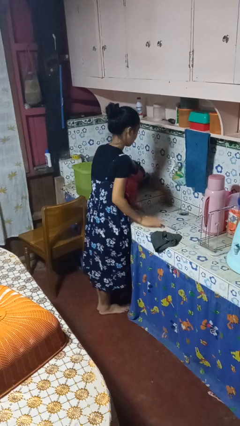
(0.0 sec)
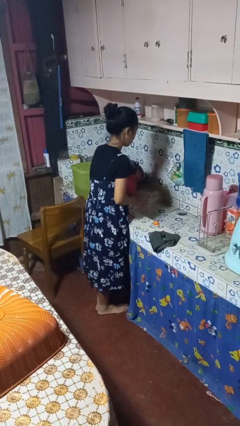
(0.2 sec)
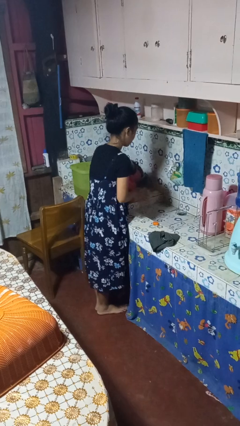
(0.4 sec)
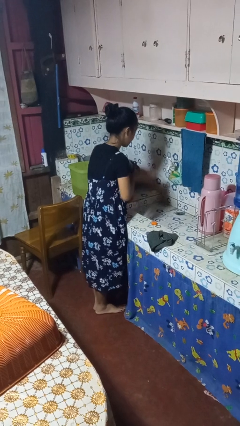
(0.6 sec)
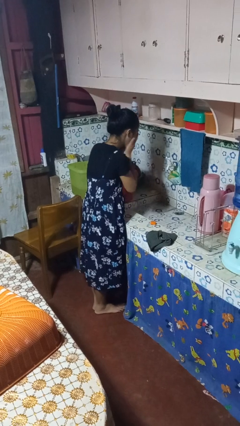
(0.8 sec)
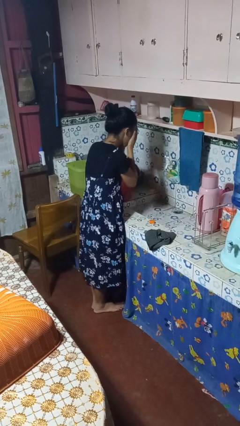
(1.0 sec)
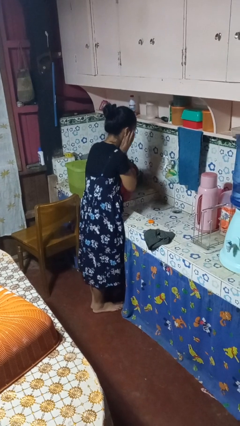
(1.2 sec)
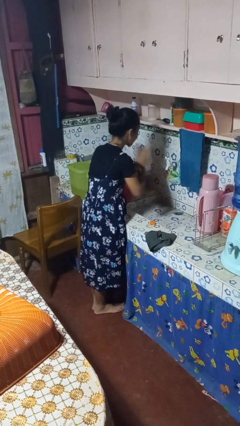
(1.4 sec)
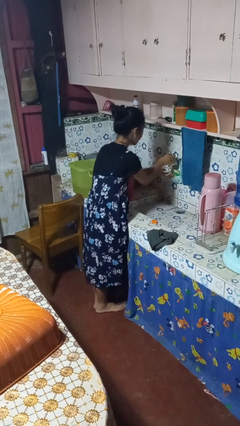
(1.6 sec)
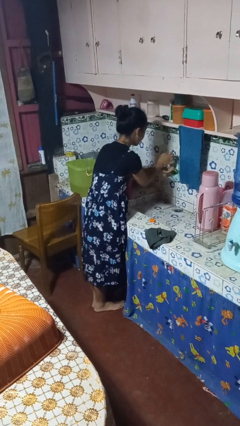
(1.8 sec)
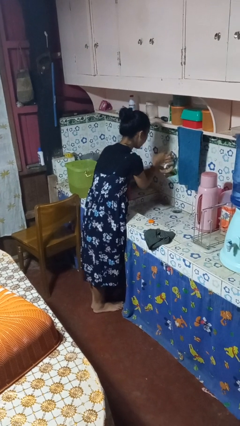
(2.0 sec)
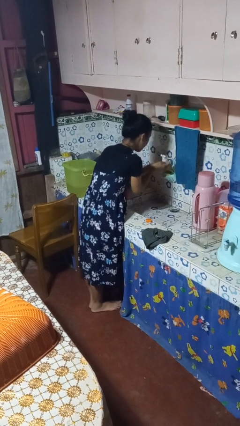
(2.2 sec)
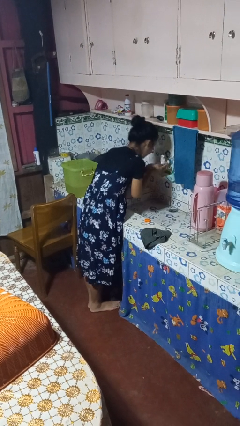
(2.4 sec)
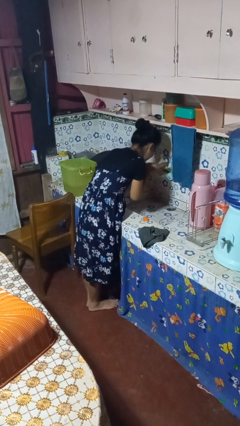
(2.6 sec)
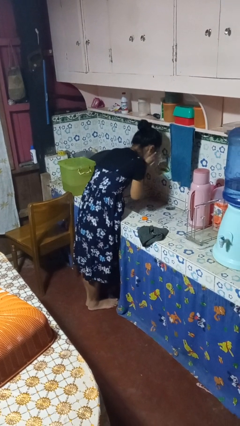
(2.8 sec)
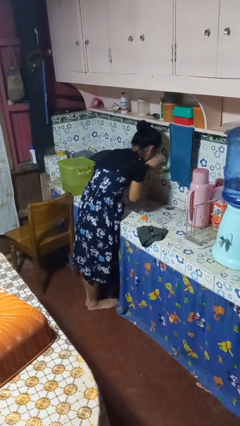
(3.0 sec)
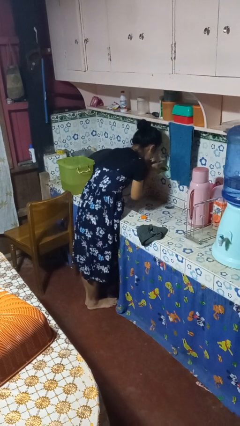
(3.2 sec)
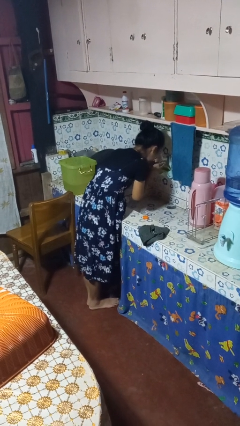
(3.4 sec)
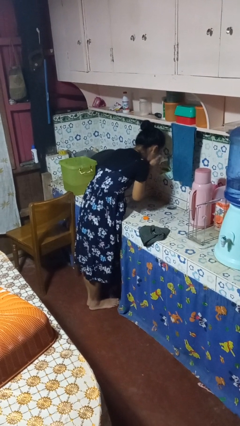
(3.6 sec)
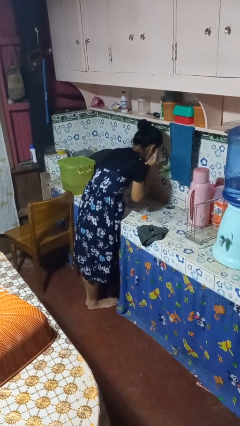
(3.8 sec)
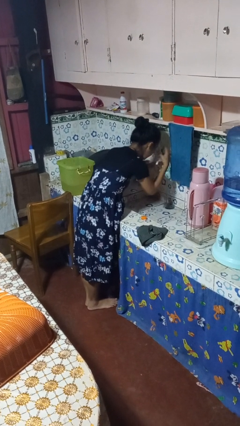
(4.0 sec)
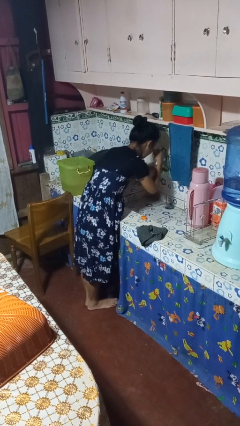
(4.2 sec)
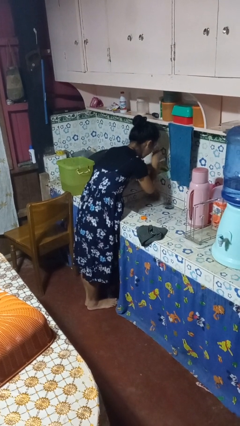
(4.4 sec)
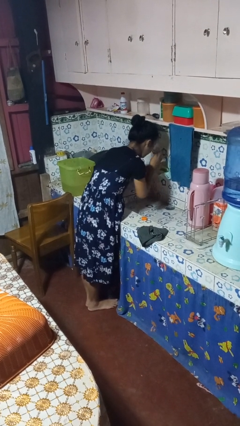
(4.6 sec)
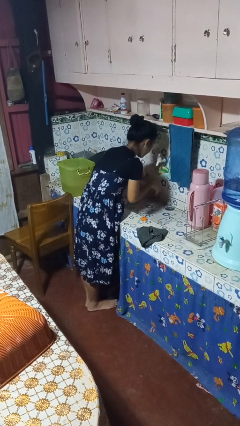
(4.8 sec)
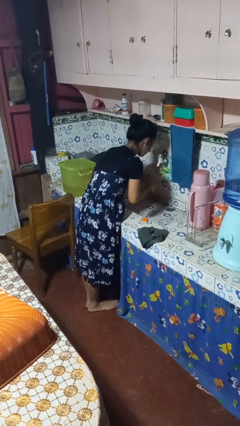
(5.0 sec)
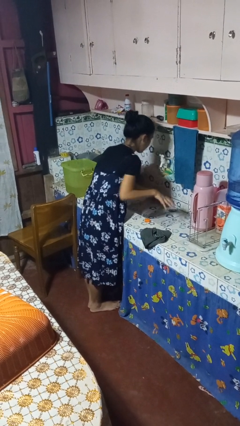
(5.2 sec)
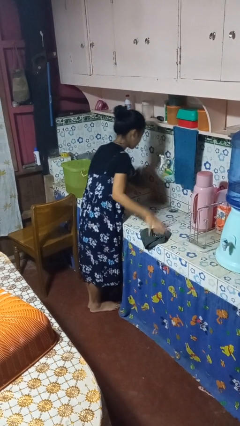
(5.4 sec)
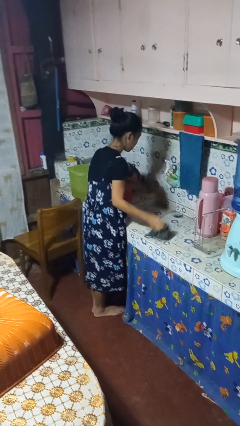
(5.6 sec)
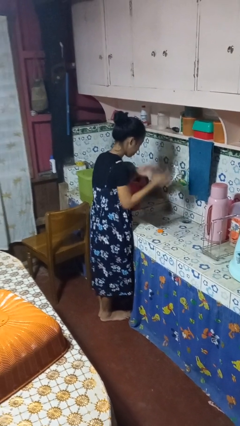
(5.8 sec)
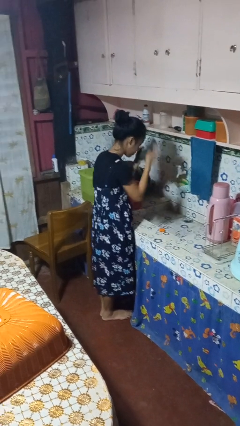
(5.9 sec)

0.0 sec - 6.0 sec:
person washes face

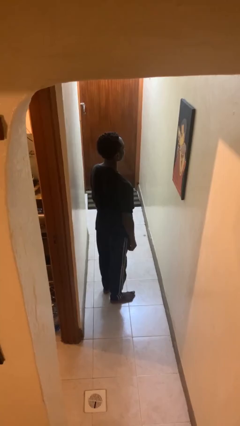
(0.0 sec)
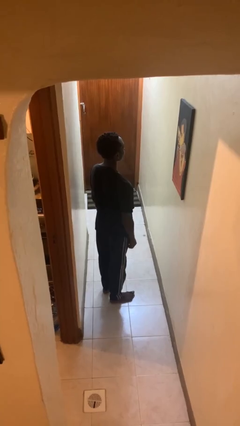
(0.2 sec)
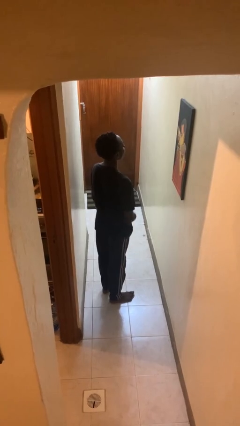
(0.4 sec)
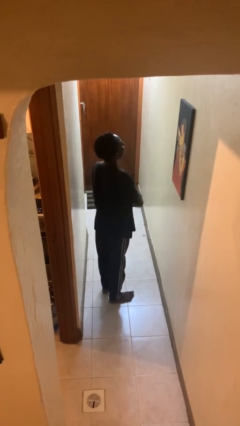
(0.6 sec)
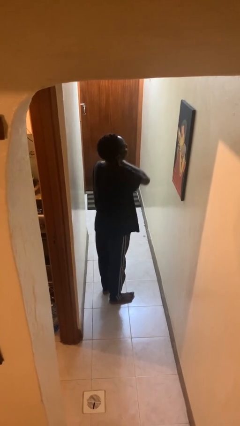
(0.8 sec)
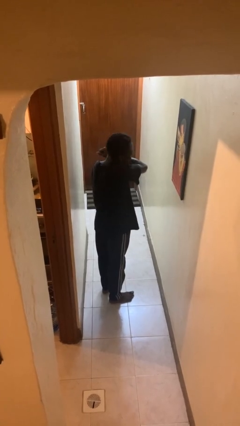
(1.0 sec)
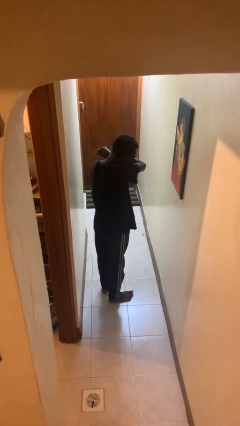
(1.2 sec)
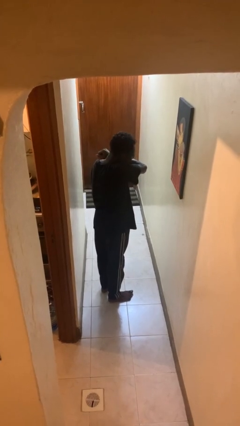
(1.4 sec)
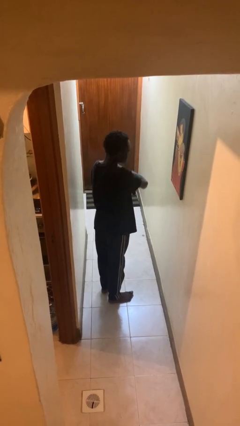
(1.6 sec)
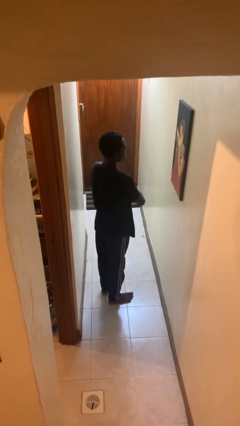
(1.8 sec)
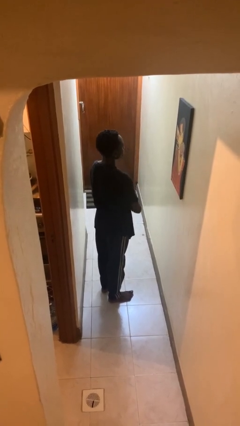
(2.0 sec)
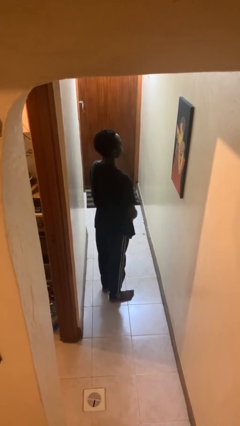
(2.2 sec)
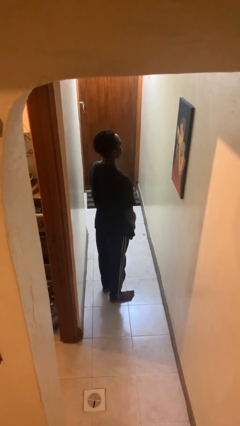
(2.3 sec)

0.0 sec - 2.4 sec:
person sneezes into arm

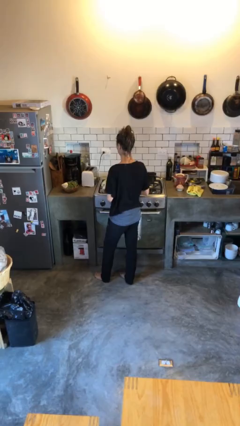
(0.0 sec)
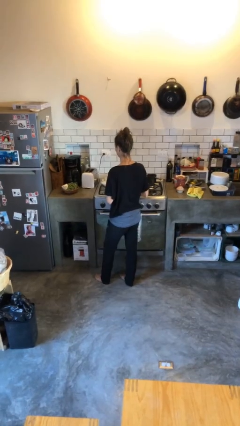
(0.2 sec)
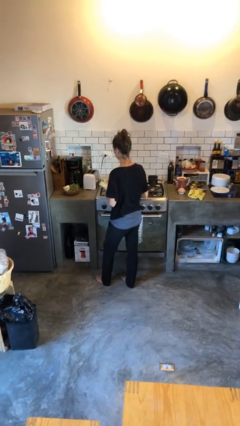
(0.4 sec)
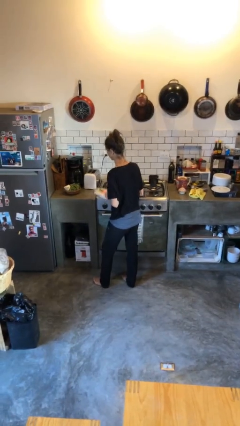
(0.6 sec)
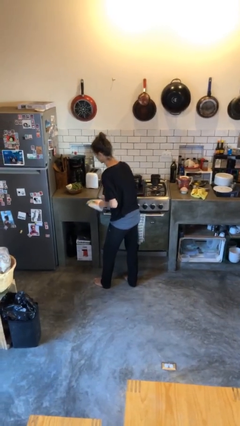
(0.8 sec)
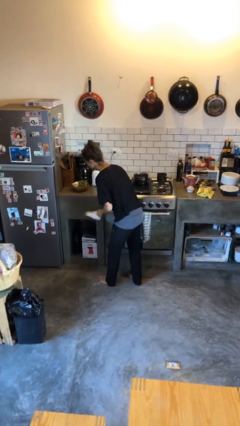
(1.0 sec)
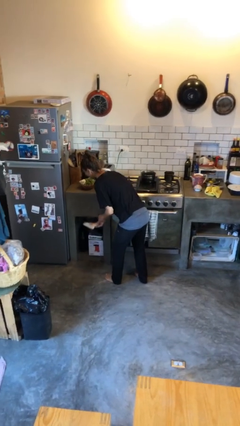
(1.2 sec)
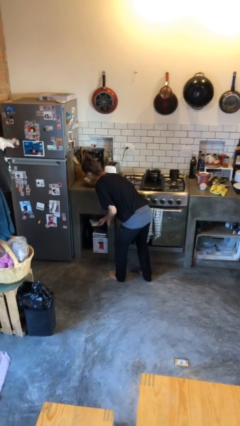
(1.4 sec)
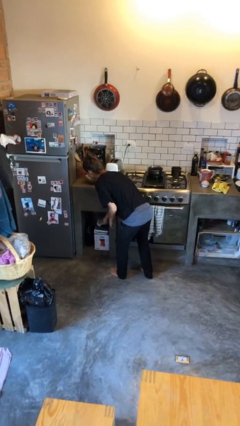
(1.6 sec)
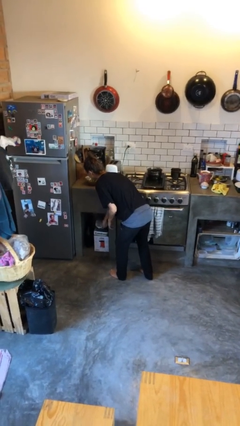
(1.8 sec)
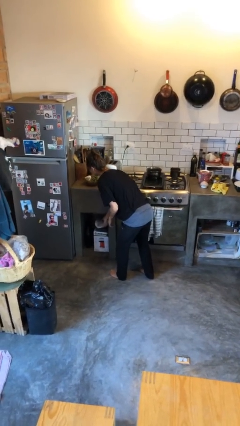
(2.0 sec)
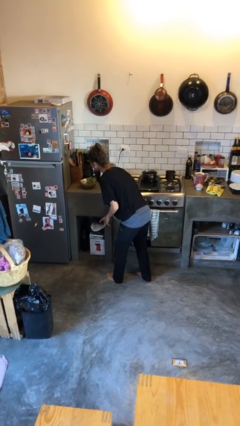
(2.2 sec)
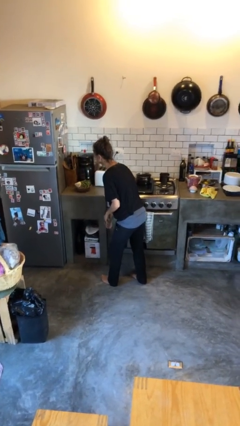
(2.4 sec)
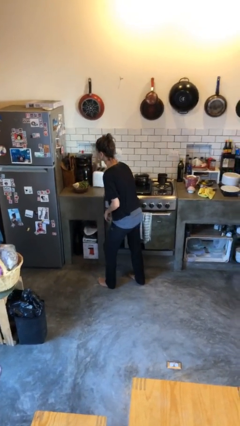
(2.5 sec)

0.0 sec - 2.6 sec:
person puts down object into cabinet

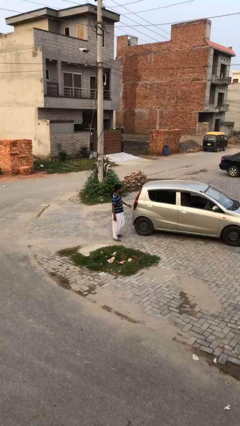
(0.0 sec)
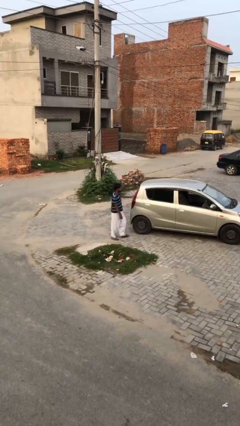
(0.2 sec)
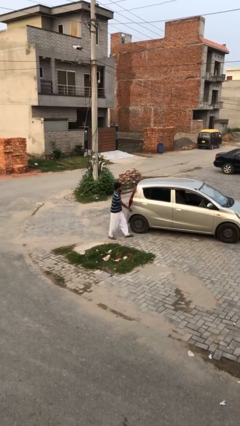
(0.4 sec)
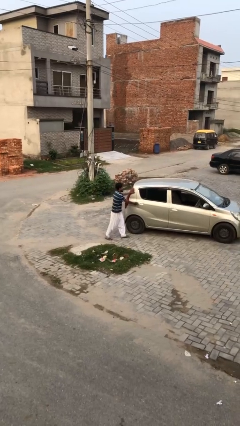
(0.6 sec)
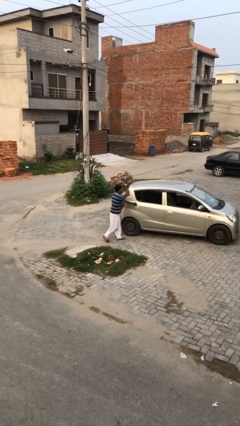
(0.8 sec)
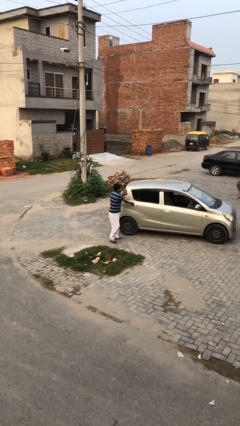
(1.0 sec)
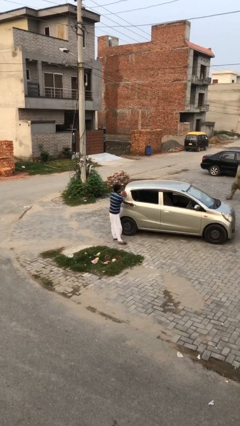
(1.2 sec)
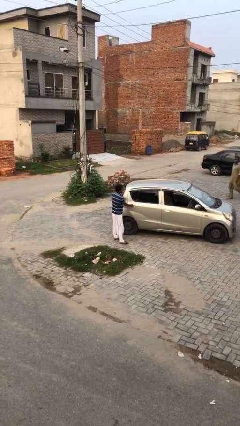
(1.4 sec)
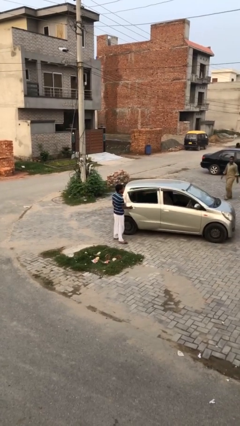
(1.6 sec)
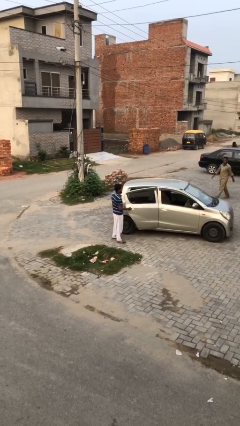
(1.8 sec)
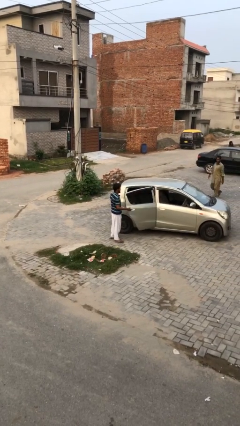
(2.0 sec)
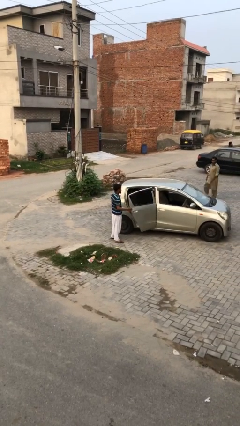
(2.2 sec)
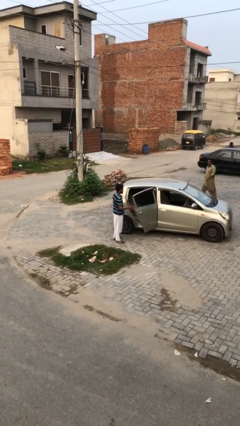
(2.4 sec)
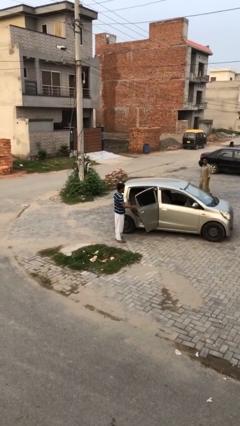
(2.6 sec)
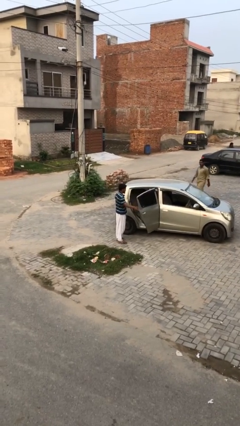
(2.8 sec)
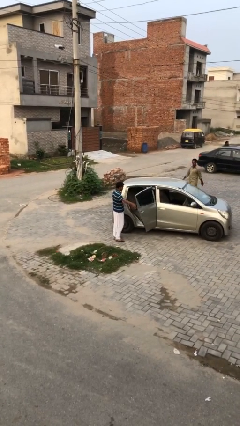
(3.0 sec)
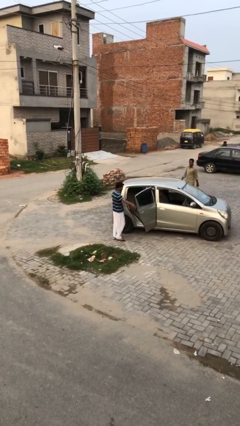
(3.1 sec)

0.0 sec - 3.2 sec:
person opens car door

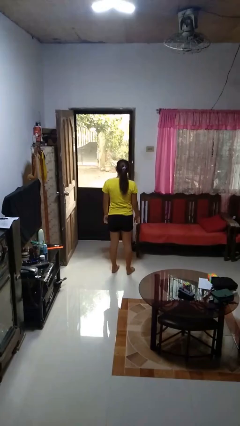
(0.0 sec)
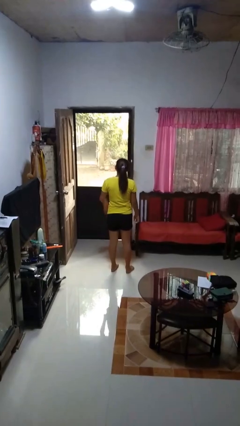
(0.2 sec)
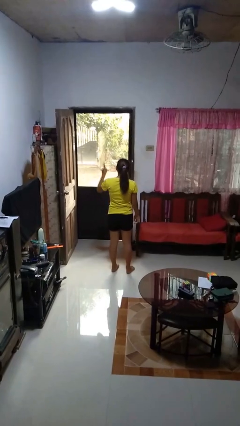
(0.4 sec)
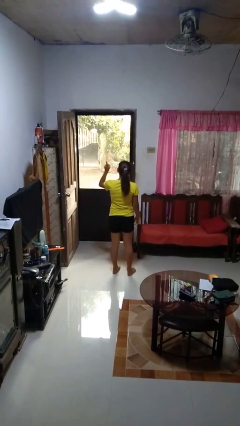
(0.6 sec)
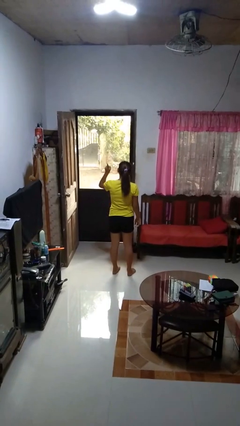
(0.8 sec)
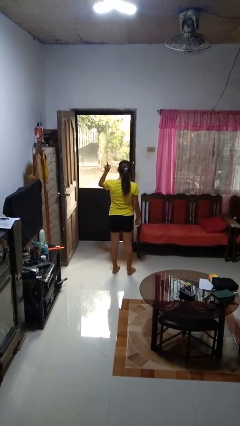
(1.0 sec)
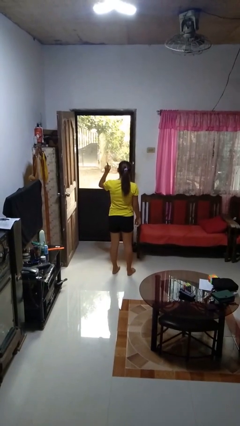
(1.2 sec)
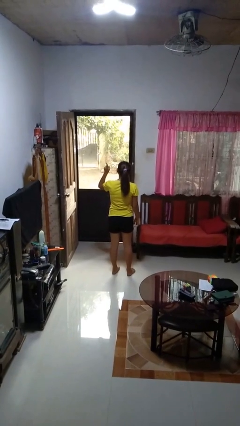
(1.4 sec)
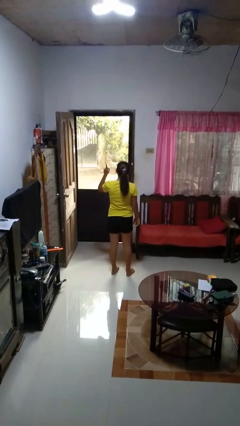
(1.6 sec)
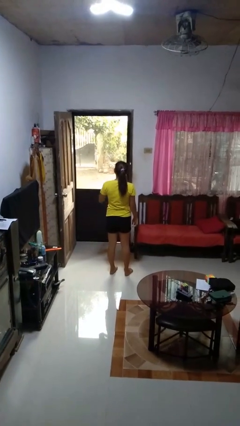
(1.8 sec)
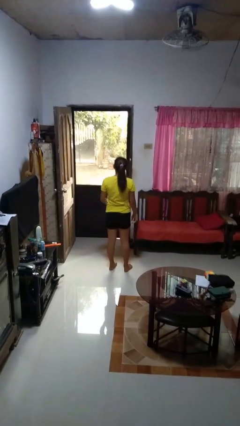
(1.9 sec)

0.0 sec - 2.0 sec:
person gestures number one

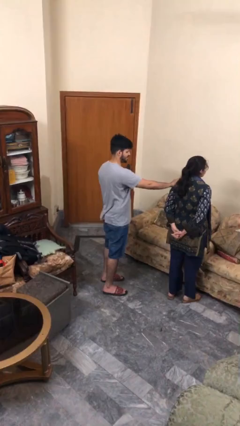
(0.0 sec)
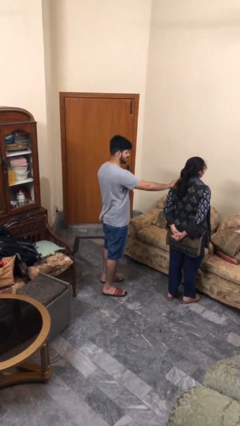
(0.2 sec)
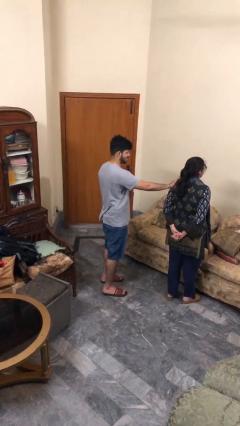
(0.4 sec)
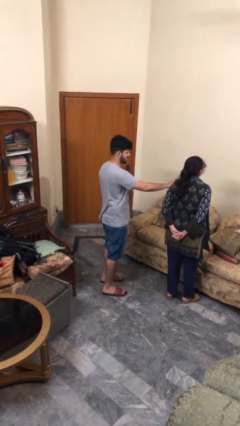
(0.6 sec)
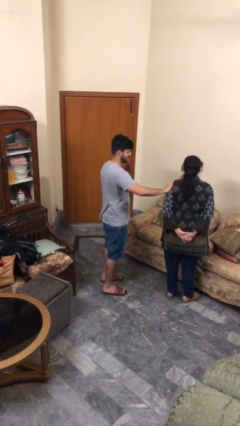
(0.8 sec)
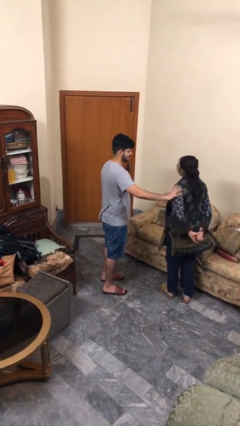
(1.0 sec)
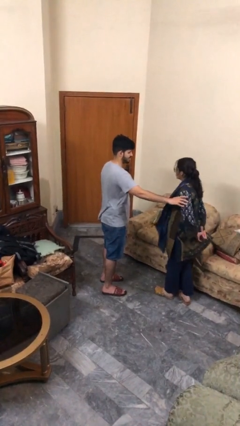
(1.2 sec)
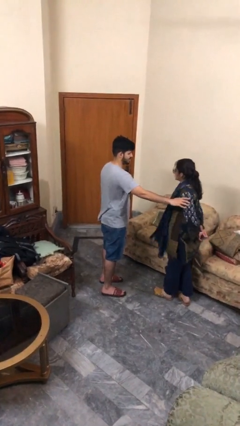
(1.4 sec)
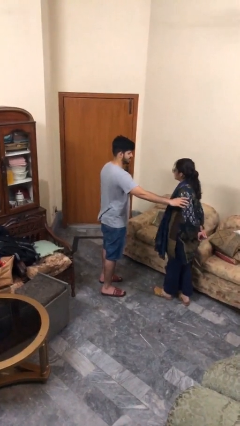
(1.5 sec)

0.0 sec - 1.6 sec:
person spins person around
